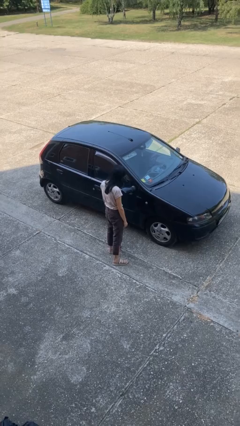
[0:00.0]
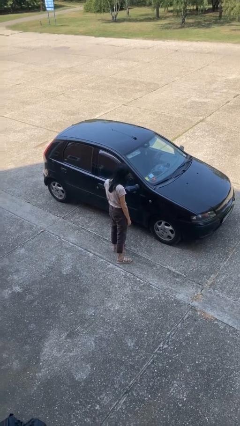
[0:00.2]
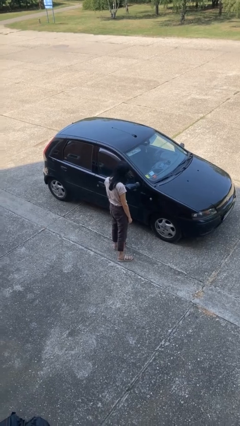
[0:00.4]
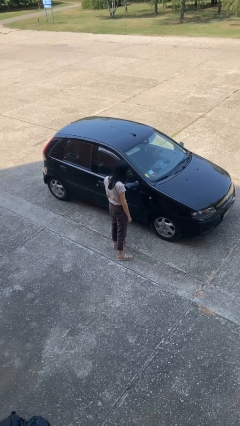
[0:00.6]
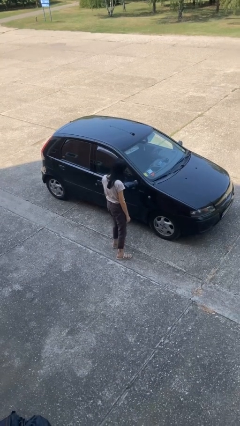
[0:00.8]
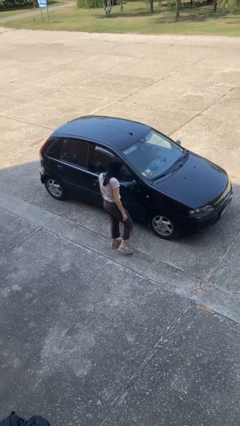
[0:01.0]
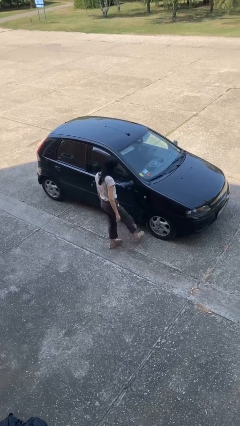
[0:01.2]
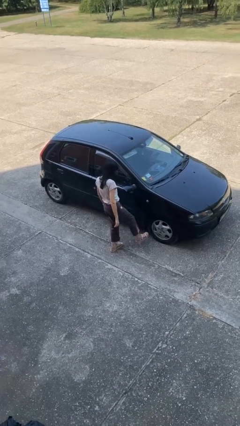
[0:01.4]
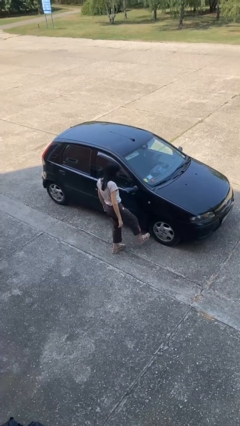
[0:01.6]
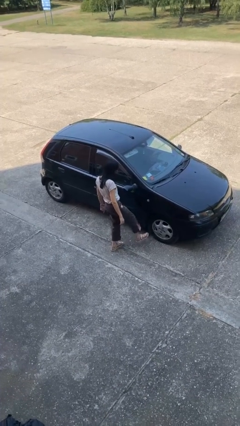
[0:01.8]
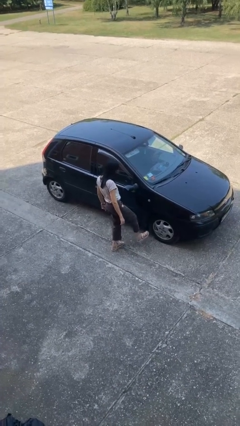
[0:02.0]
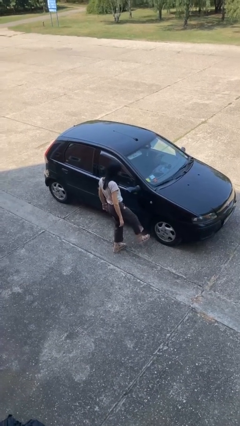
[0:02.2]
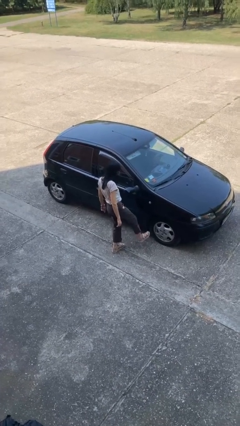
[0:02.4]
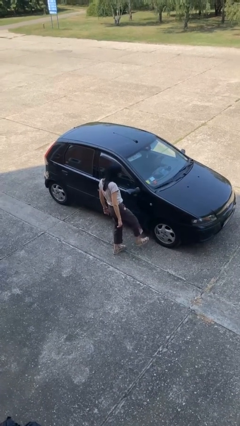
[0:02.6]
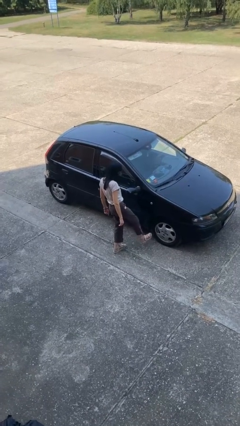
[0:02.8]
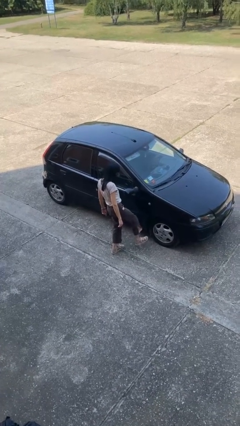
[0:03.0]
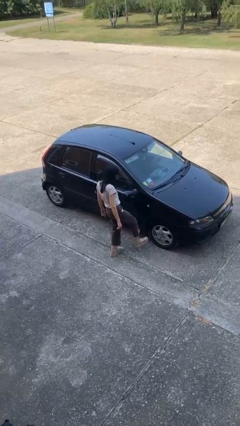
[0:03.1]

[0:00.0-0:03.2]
person kicks car tires

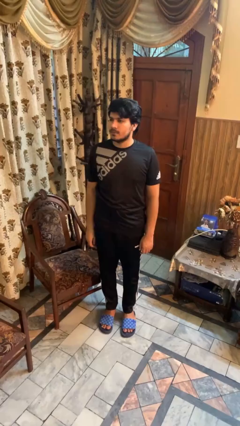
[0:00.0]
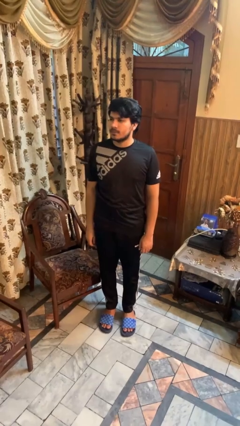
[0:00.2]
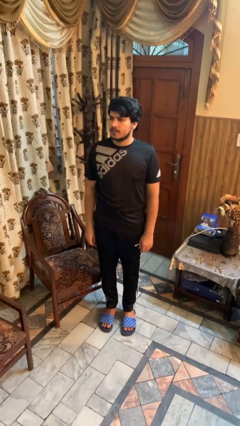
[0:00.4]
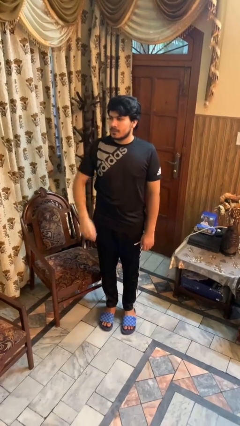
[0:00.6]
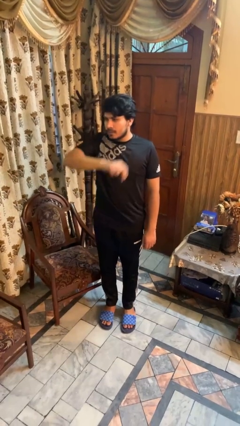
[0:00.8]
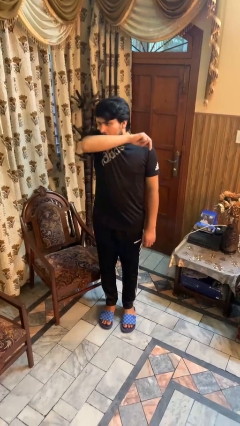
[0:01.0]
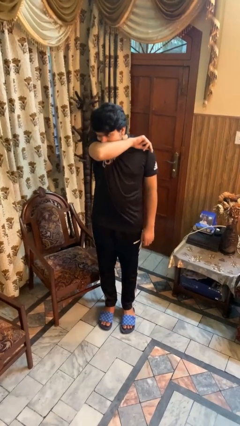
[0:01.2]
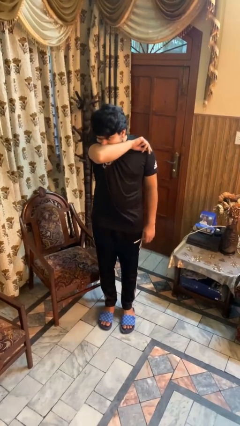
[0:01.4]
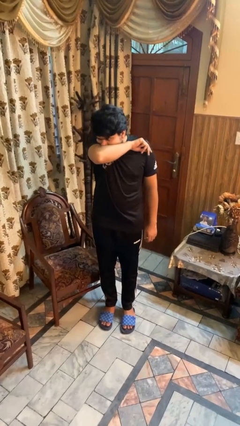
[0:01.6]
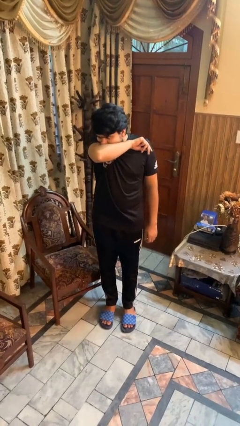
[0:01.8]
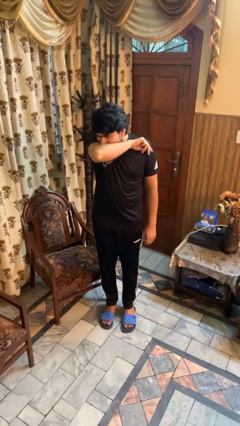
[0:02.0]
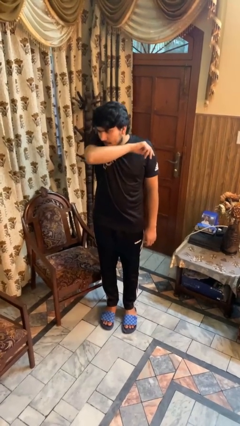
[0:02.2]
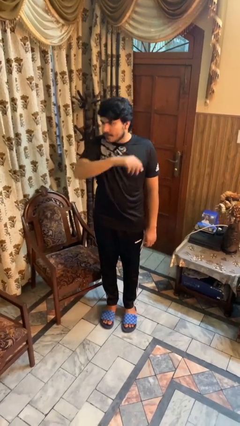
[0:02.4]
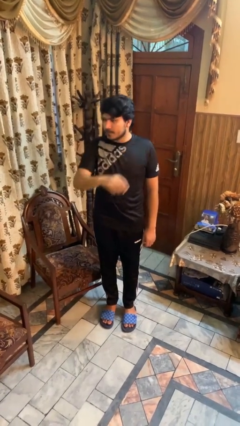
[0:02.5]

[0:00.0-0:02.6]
person sneezes into arm

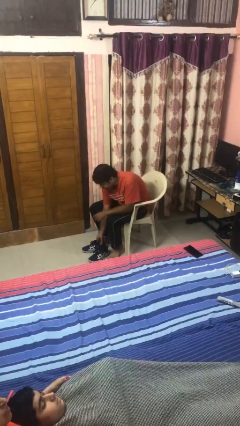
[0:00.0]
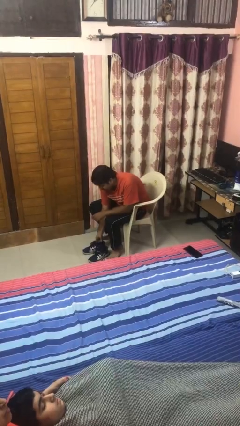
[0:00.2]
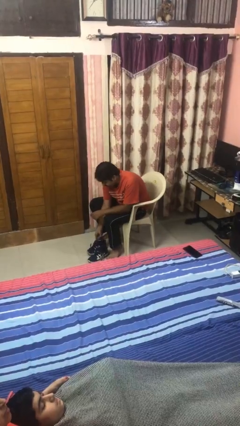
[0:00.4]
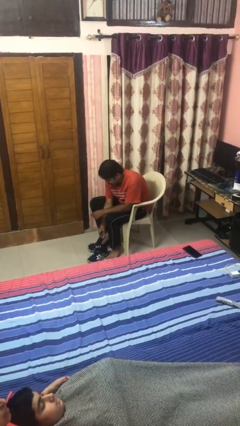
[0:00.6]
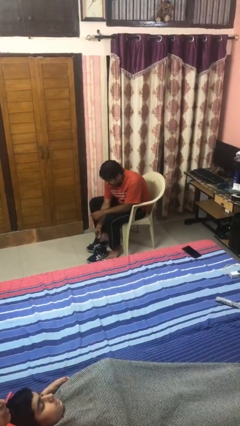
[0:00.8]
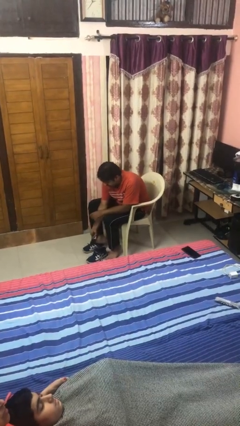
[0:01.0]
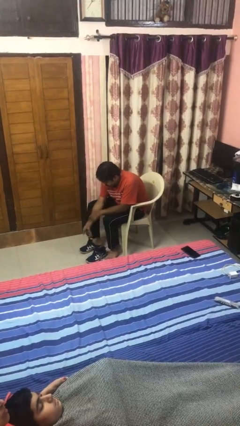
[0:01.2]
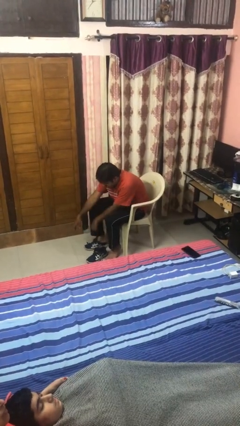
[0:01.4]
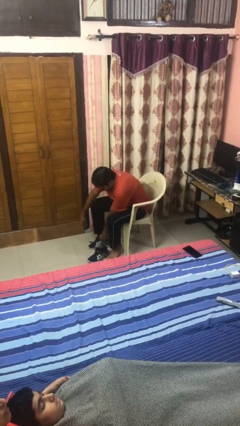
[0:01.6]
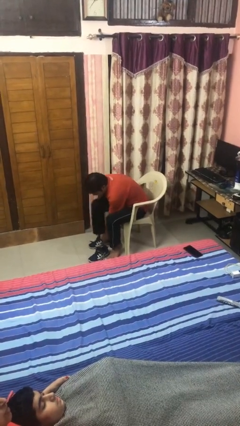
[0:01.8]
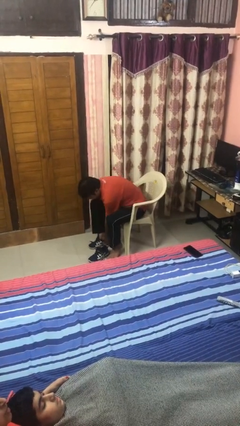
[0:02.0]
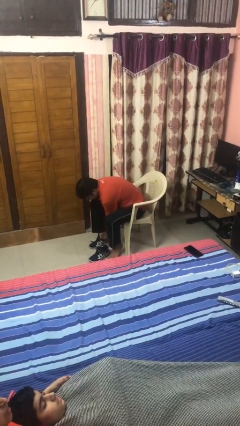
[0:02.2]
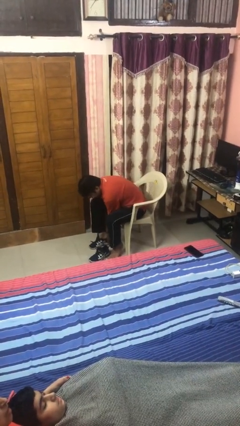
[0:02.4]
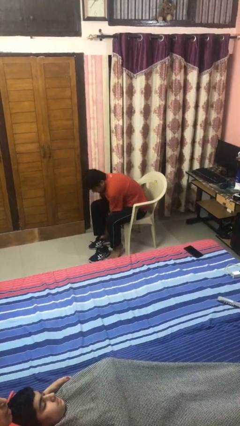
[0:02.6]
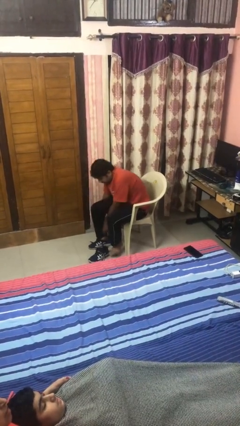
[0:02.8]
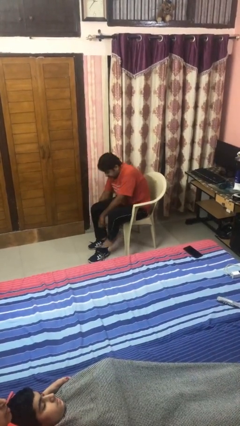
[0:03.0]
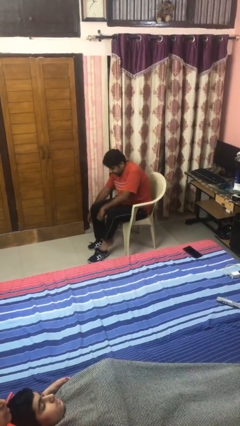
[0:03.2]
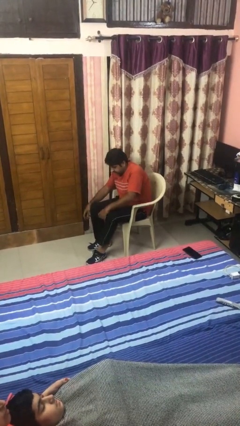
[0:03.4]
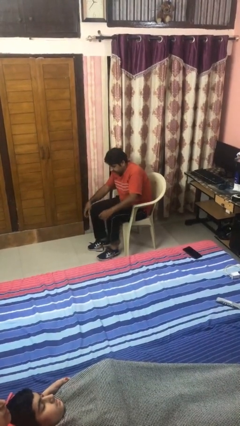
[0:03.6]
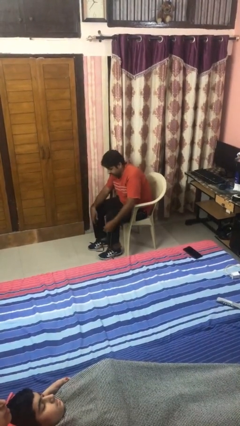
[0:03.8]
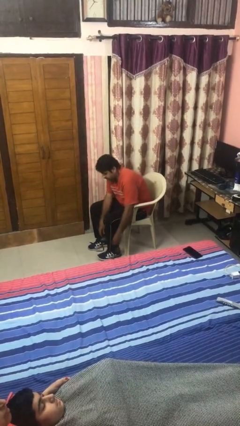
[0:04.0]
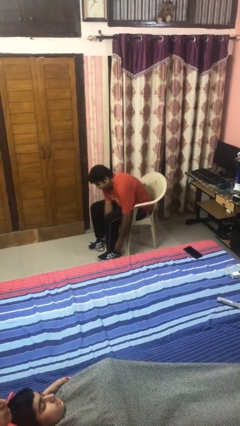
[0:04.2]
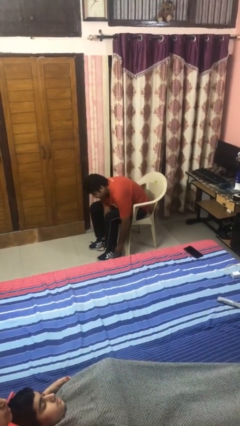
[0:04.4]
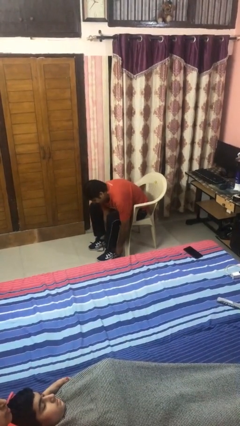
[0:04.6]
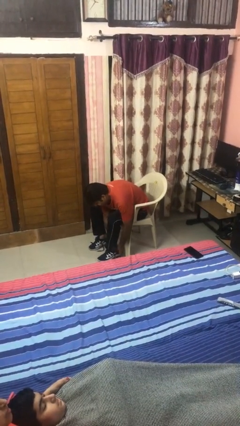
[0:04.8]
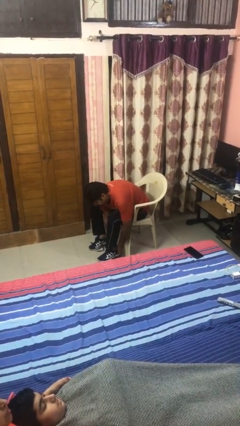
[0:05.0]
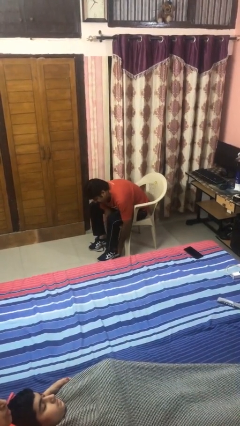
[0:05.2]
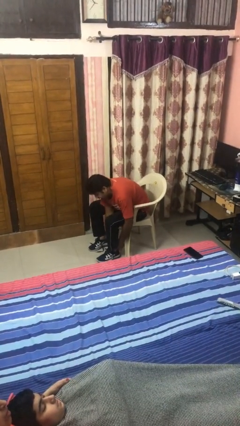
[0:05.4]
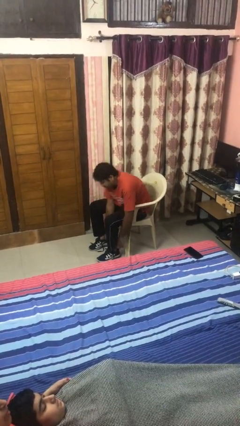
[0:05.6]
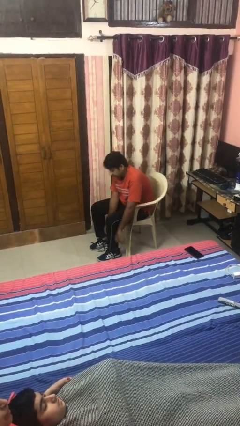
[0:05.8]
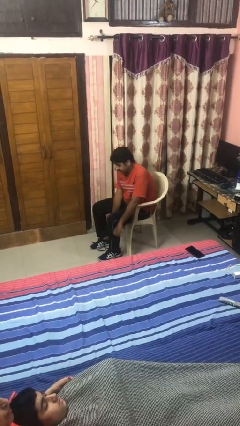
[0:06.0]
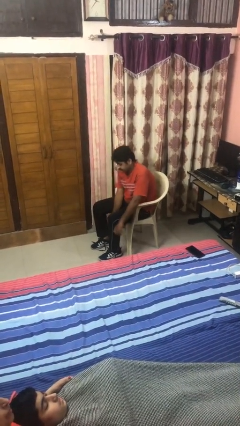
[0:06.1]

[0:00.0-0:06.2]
person puts on boots

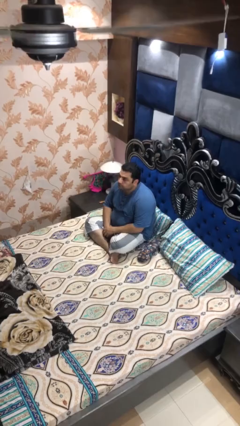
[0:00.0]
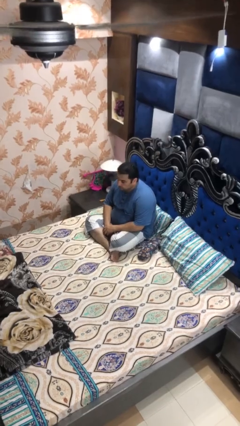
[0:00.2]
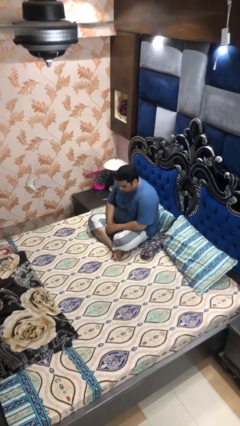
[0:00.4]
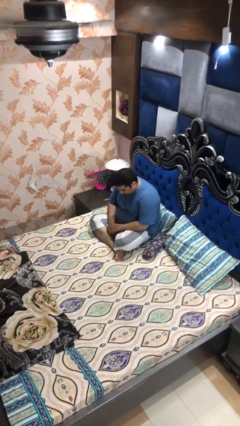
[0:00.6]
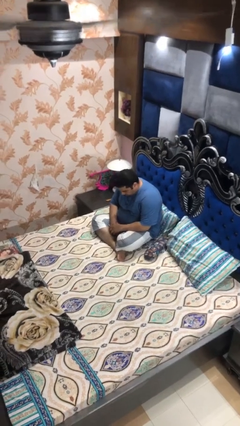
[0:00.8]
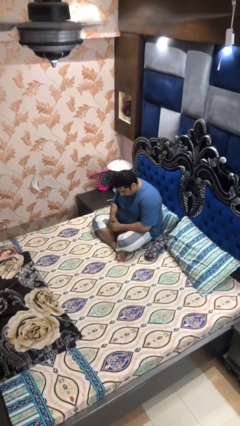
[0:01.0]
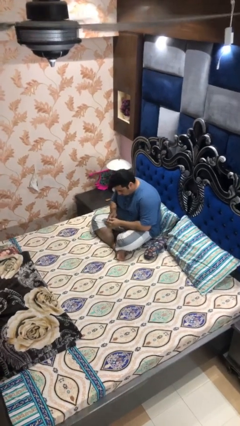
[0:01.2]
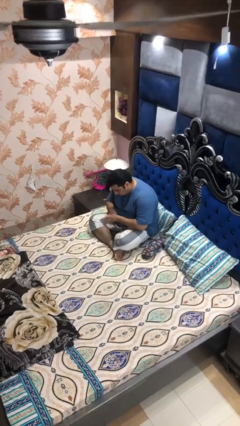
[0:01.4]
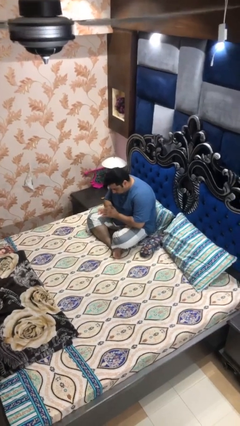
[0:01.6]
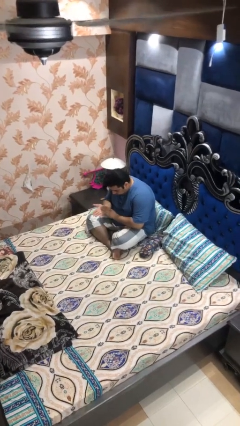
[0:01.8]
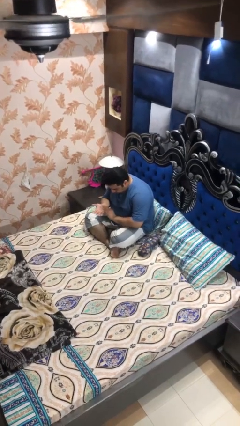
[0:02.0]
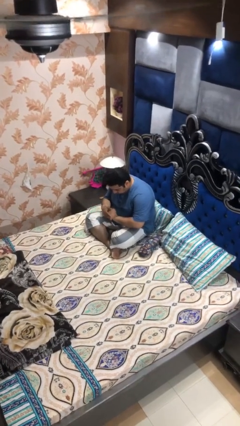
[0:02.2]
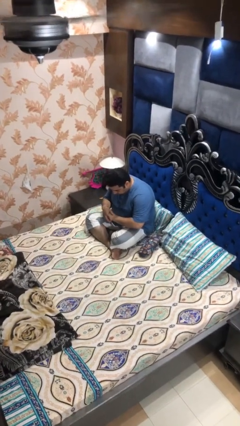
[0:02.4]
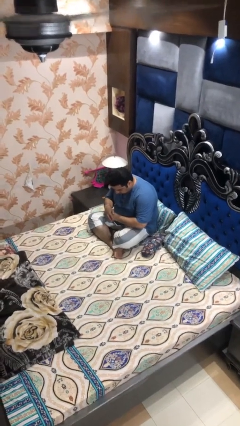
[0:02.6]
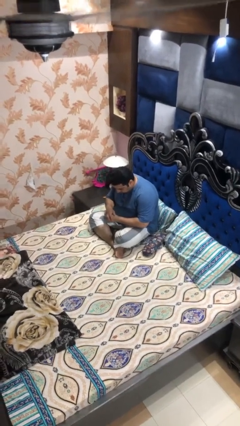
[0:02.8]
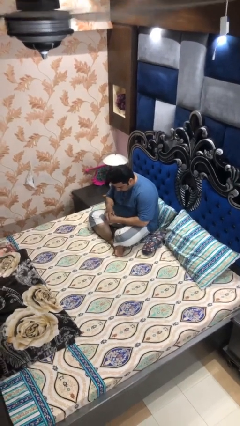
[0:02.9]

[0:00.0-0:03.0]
person looks at hands in lap

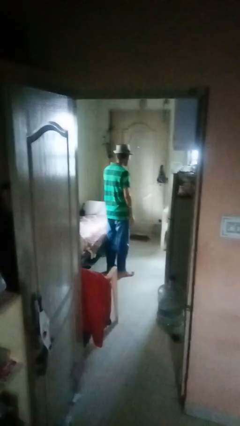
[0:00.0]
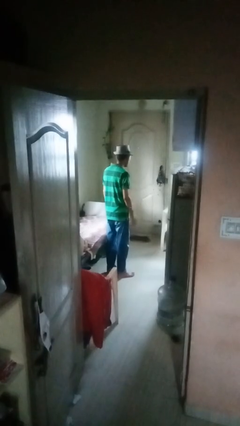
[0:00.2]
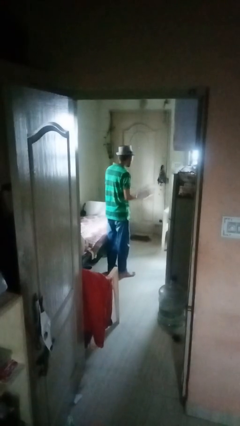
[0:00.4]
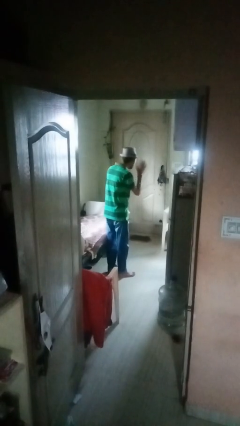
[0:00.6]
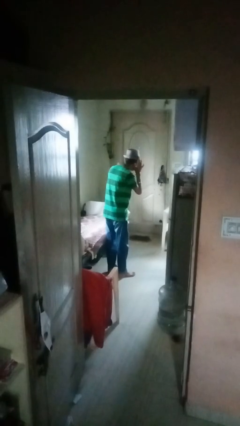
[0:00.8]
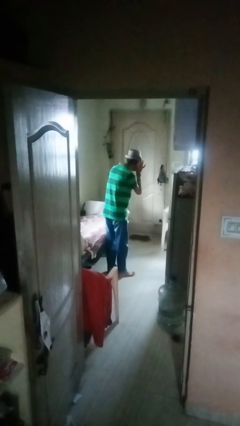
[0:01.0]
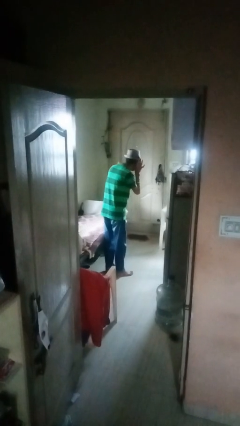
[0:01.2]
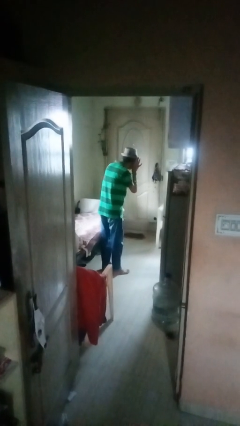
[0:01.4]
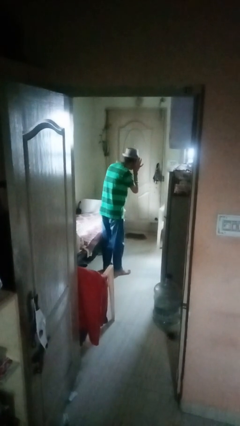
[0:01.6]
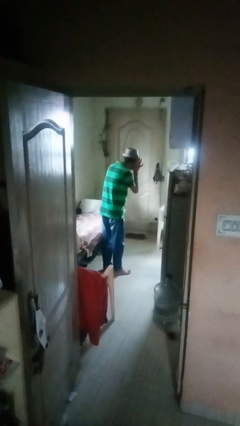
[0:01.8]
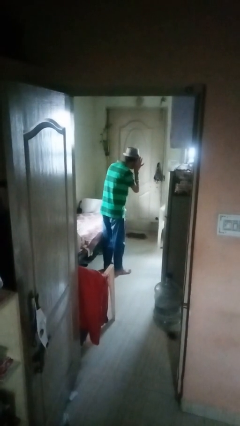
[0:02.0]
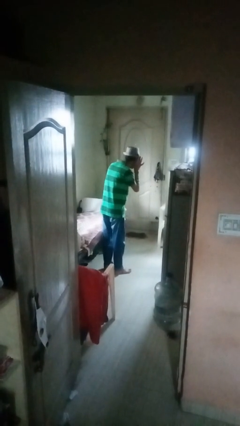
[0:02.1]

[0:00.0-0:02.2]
person gestures listen closely

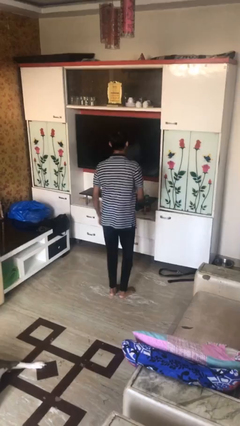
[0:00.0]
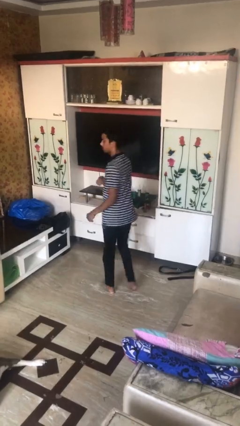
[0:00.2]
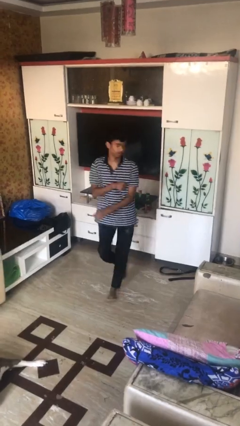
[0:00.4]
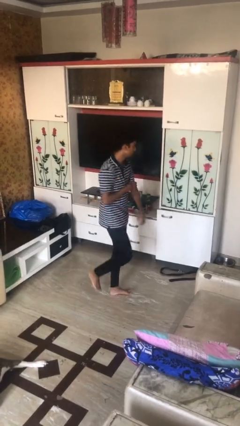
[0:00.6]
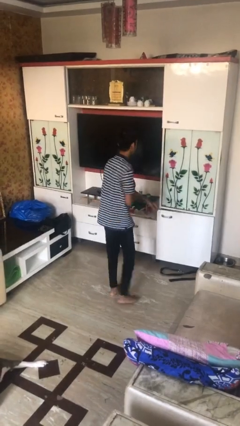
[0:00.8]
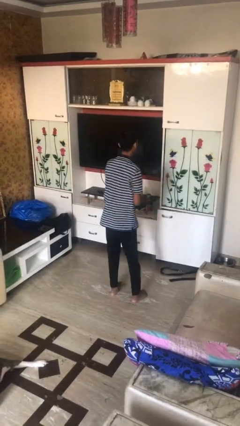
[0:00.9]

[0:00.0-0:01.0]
person twirls
